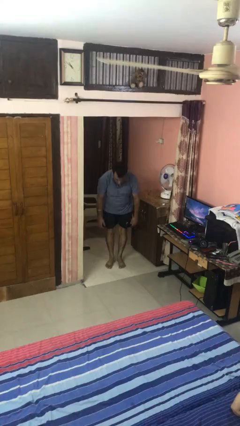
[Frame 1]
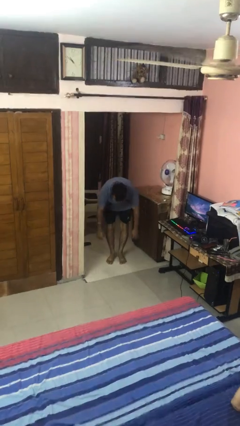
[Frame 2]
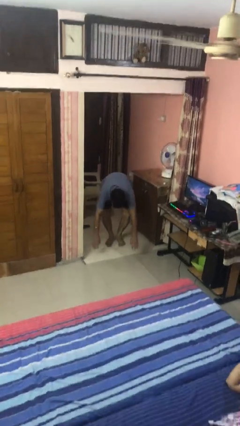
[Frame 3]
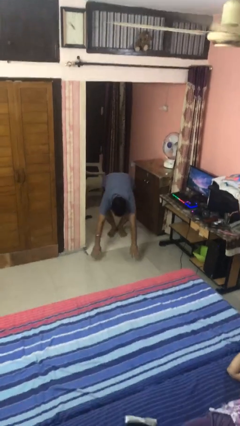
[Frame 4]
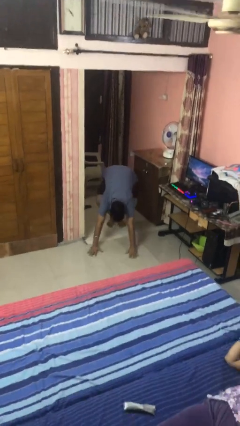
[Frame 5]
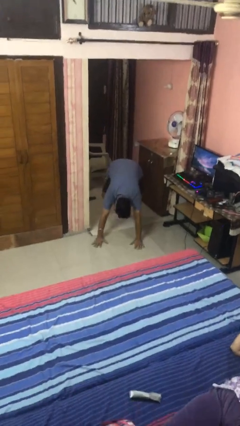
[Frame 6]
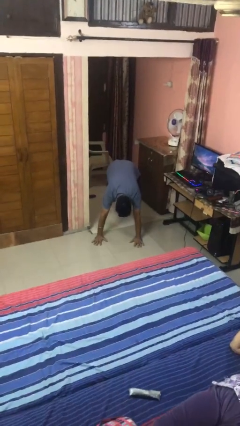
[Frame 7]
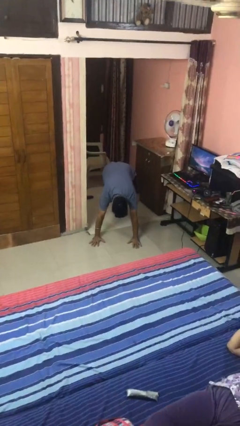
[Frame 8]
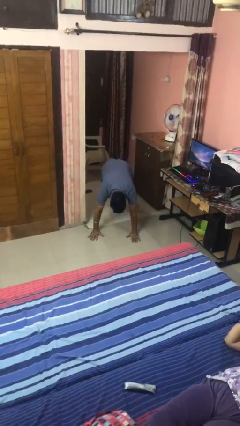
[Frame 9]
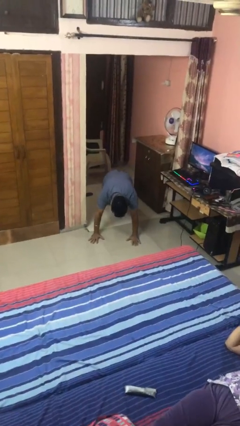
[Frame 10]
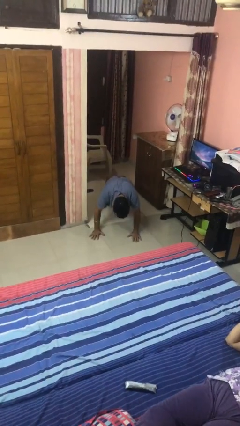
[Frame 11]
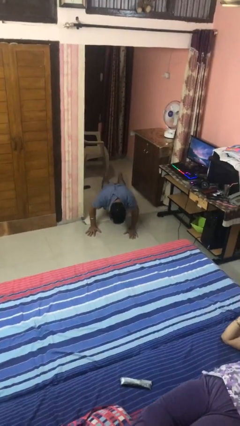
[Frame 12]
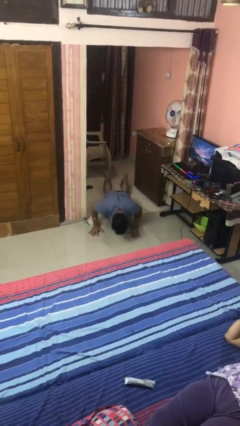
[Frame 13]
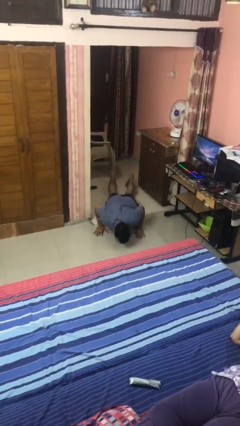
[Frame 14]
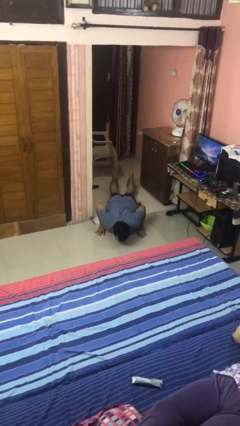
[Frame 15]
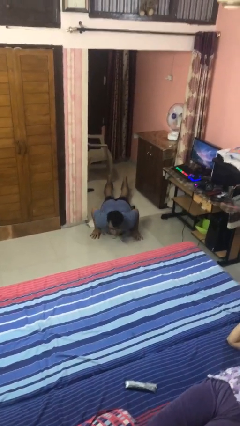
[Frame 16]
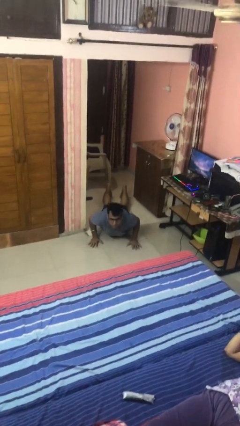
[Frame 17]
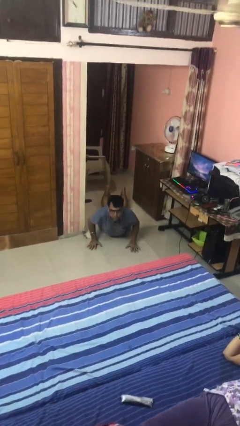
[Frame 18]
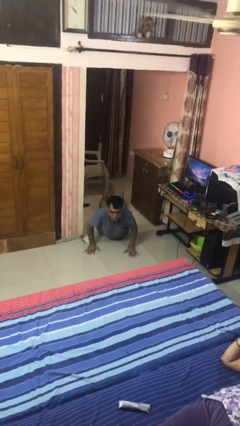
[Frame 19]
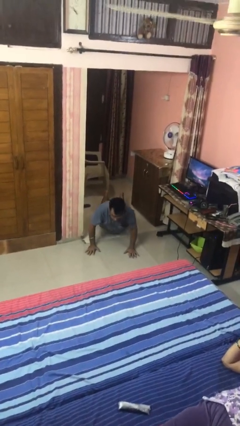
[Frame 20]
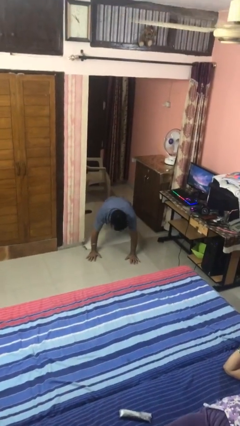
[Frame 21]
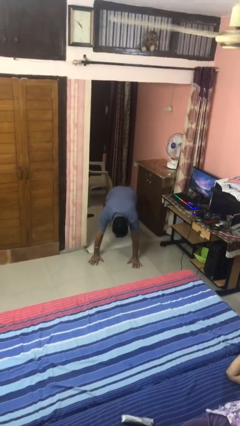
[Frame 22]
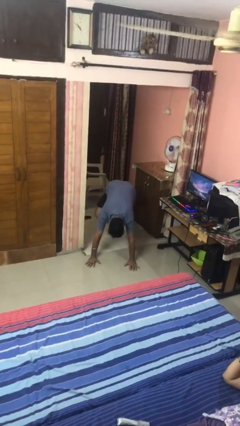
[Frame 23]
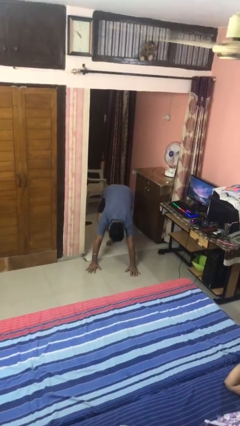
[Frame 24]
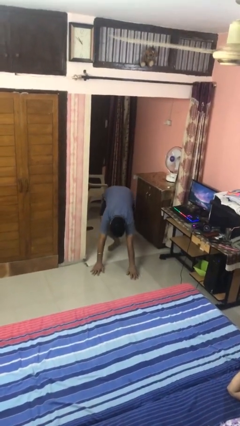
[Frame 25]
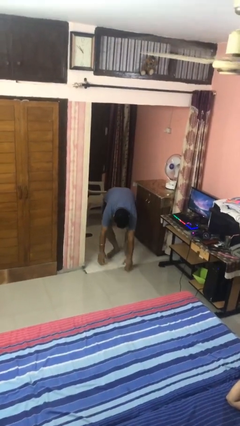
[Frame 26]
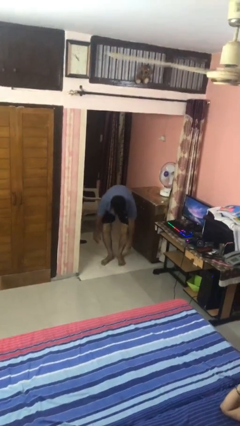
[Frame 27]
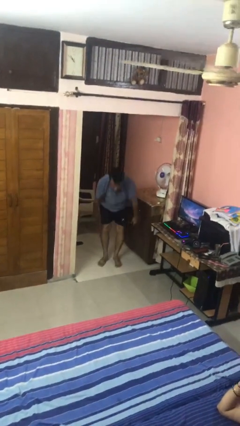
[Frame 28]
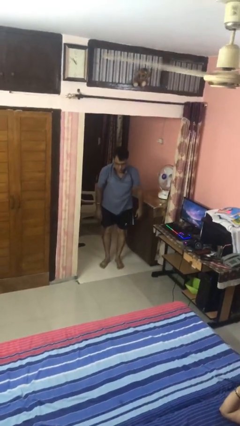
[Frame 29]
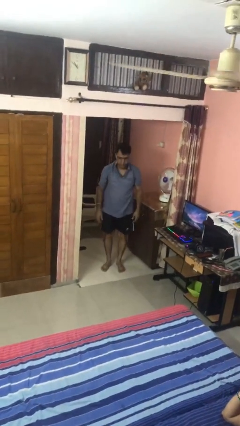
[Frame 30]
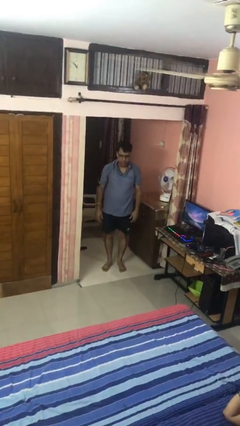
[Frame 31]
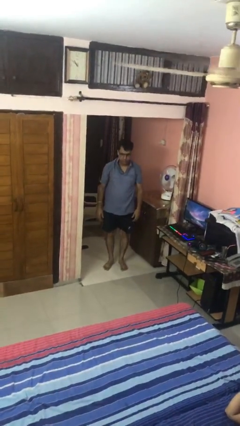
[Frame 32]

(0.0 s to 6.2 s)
person exercises with pushup

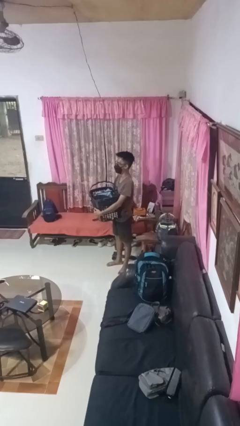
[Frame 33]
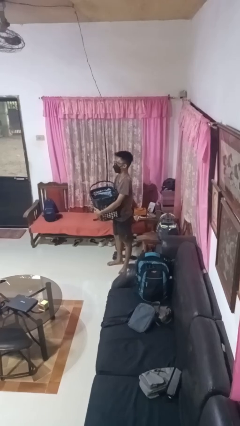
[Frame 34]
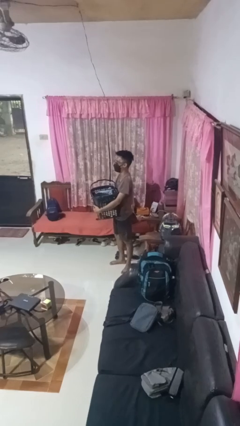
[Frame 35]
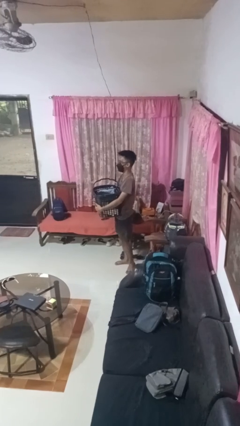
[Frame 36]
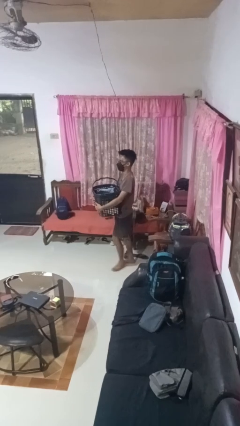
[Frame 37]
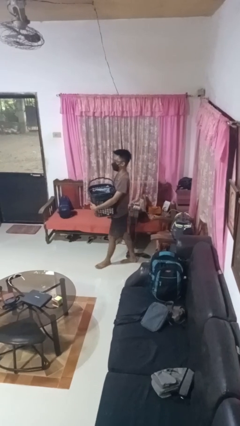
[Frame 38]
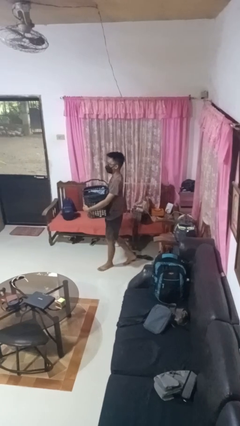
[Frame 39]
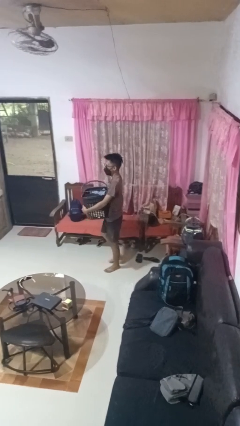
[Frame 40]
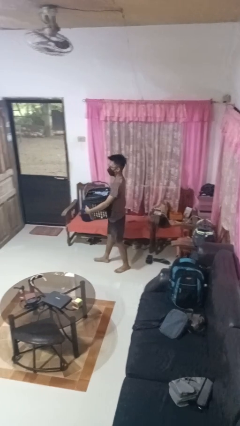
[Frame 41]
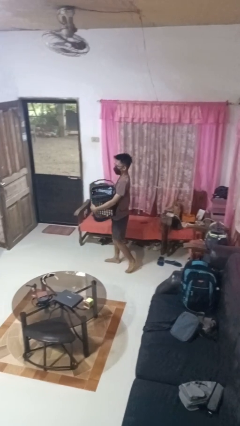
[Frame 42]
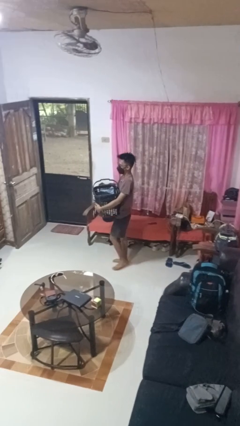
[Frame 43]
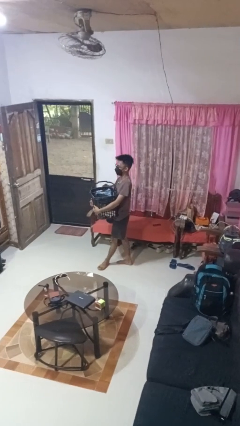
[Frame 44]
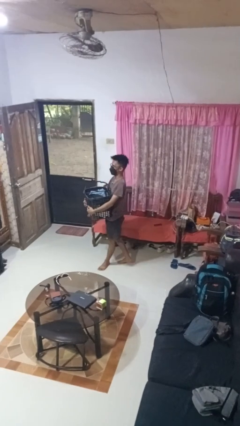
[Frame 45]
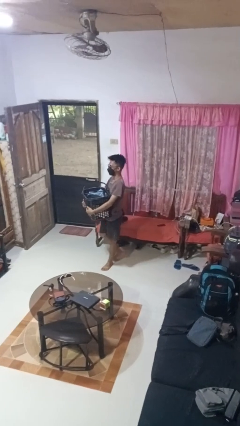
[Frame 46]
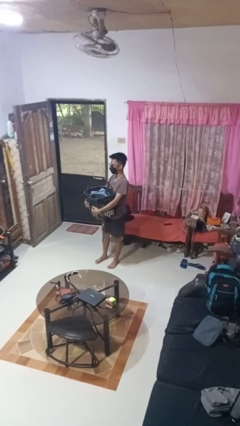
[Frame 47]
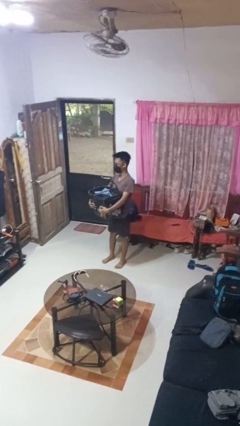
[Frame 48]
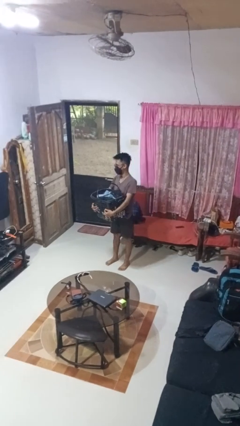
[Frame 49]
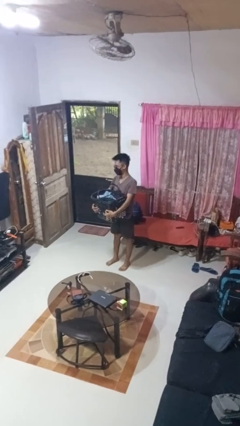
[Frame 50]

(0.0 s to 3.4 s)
person carries laundry basket

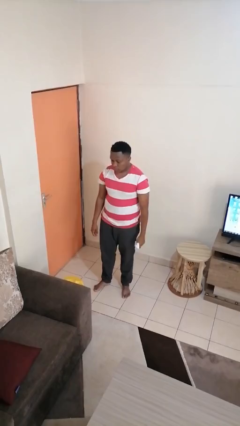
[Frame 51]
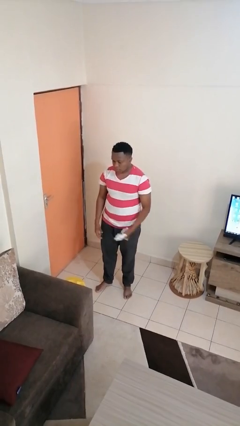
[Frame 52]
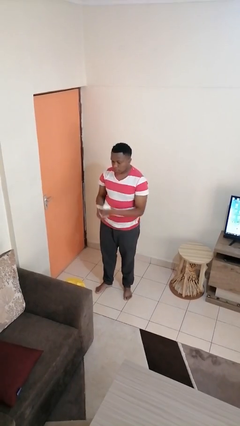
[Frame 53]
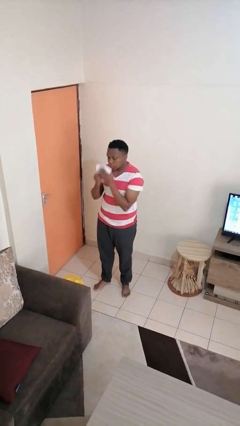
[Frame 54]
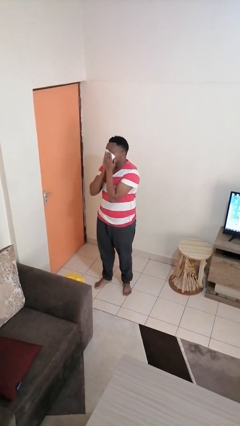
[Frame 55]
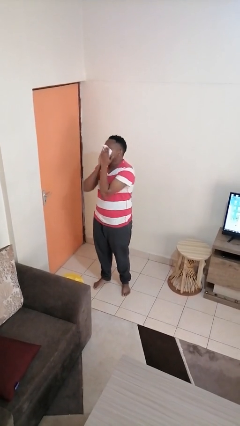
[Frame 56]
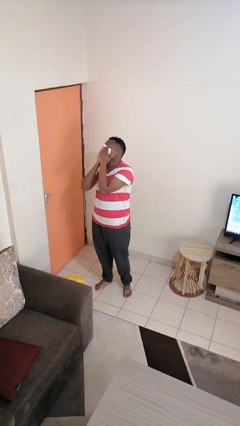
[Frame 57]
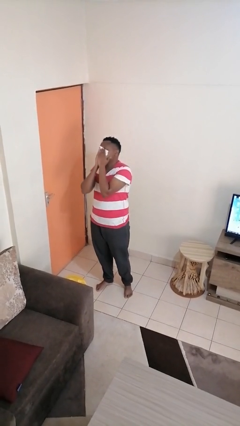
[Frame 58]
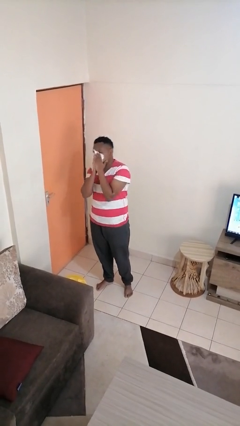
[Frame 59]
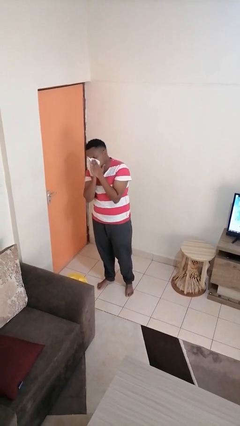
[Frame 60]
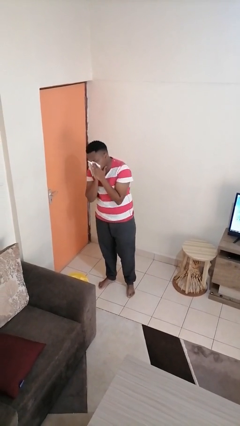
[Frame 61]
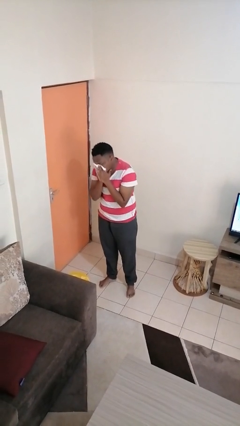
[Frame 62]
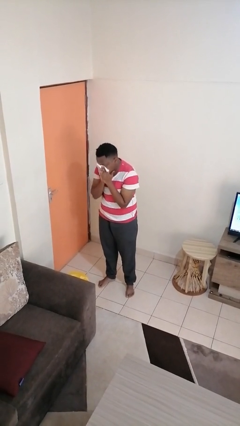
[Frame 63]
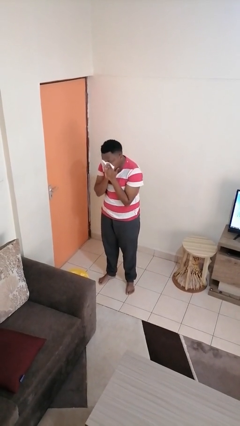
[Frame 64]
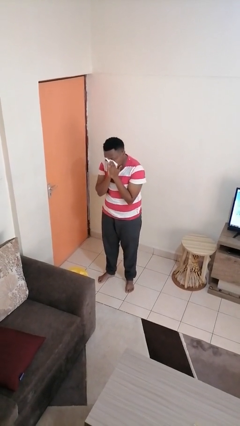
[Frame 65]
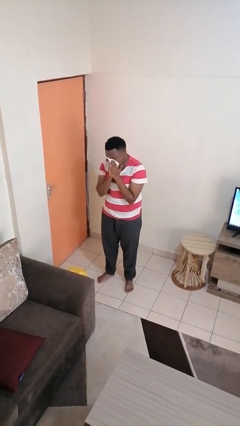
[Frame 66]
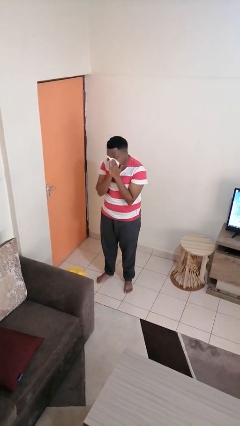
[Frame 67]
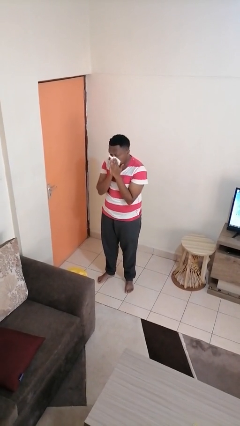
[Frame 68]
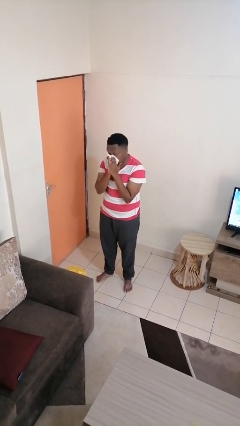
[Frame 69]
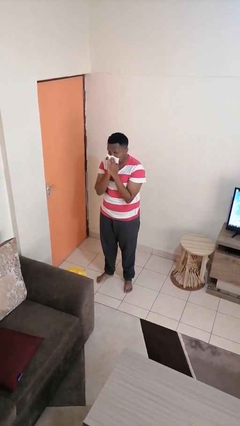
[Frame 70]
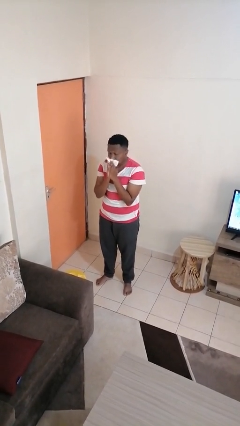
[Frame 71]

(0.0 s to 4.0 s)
person blows nose

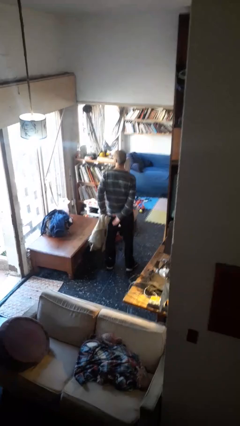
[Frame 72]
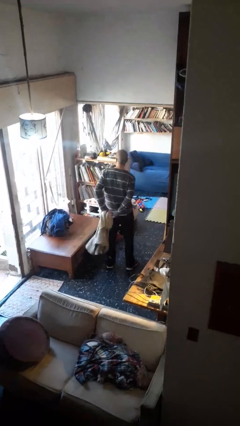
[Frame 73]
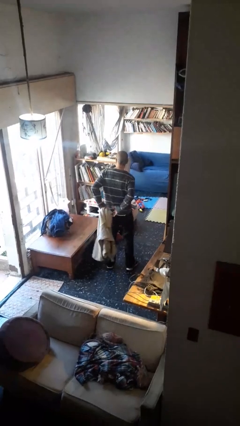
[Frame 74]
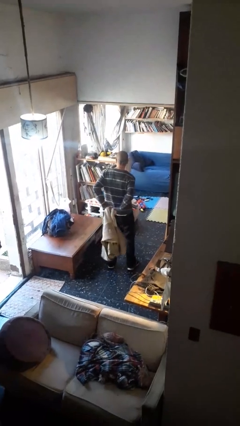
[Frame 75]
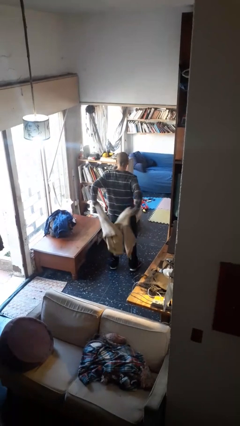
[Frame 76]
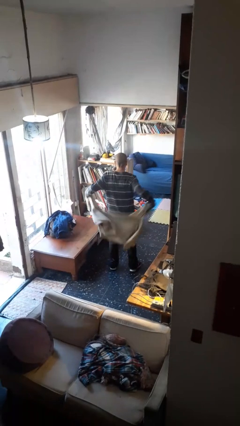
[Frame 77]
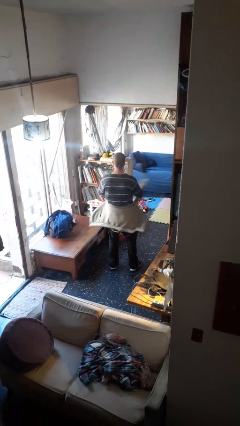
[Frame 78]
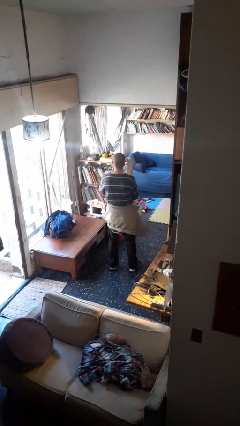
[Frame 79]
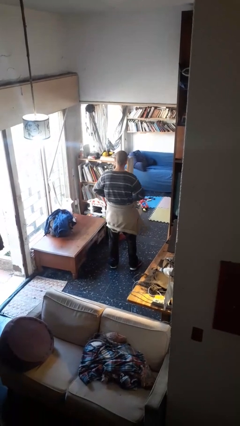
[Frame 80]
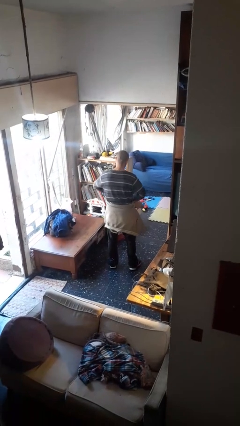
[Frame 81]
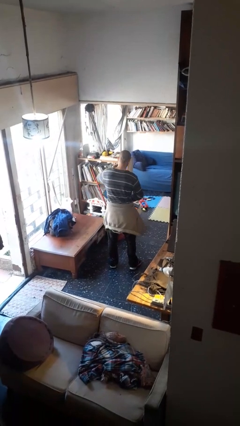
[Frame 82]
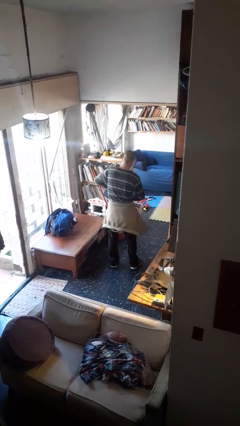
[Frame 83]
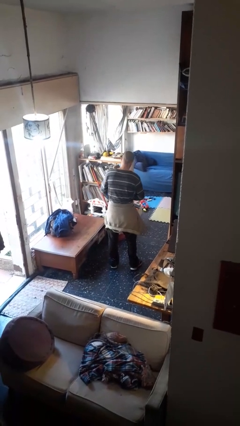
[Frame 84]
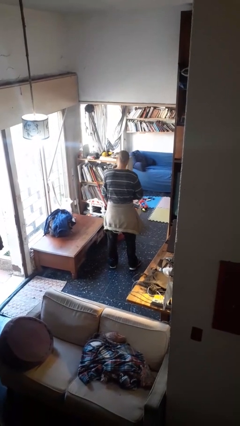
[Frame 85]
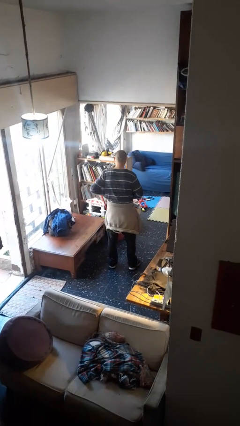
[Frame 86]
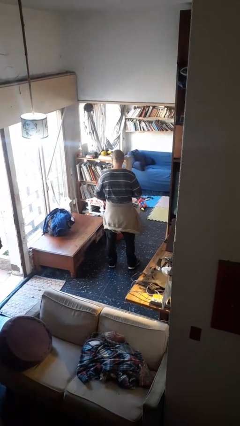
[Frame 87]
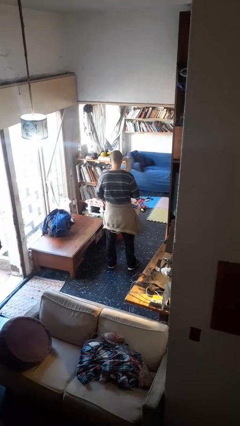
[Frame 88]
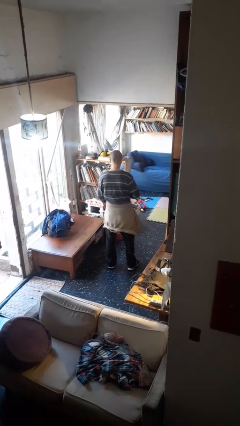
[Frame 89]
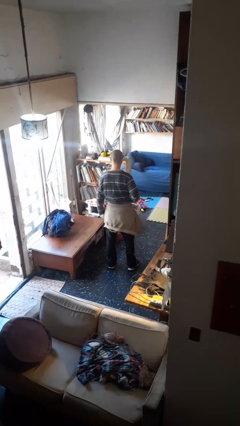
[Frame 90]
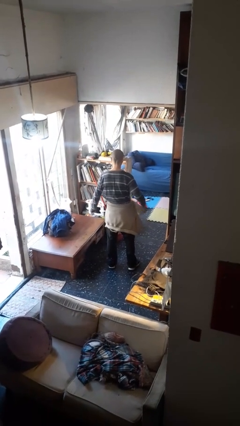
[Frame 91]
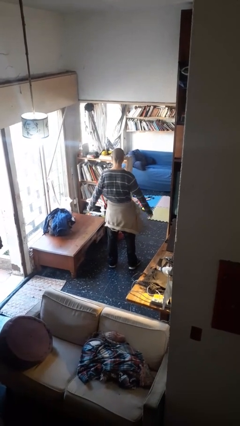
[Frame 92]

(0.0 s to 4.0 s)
person ties jacket around waist
